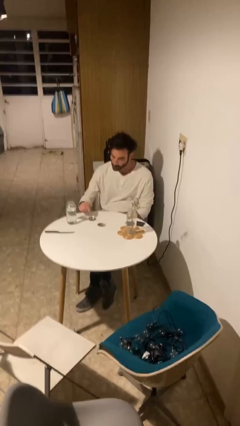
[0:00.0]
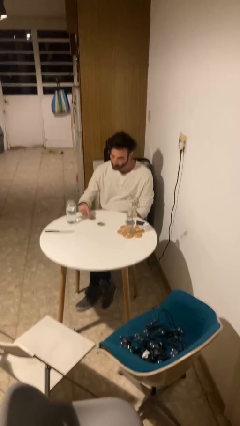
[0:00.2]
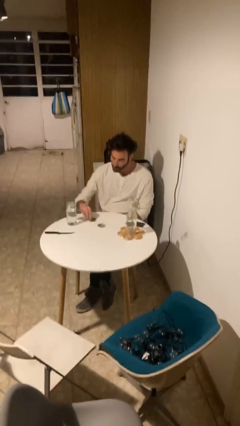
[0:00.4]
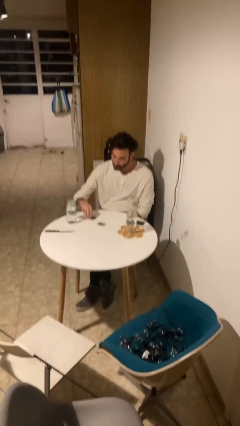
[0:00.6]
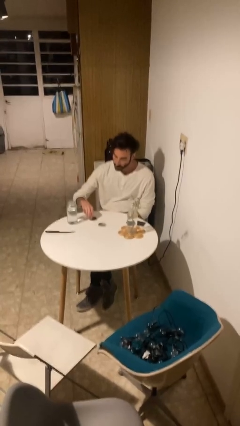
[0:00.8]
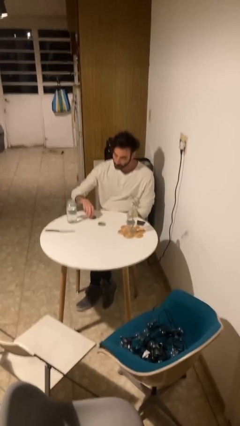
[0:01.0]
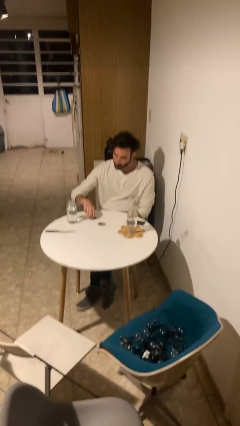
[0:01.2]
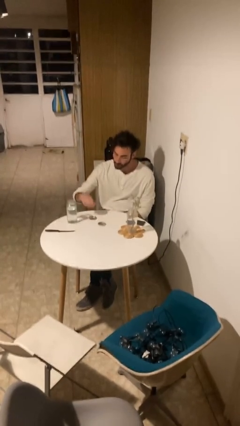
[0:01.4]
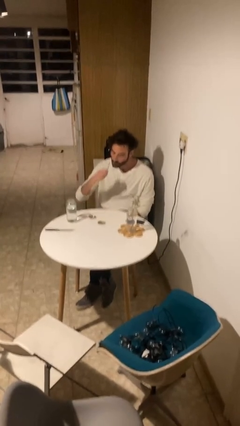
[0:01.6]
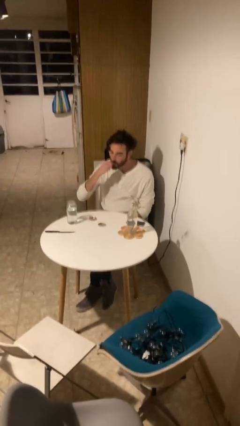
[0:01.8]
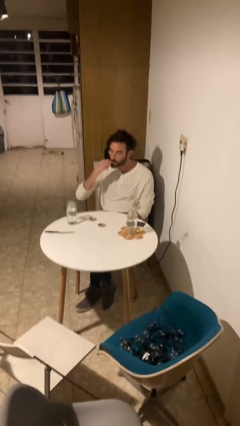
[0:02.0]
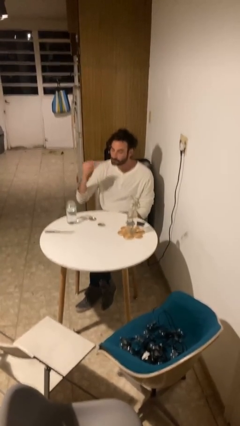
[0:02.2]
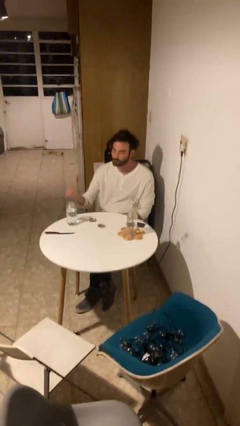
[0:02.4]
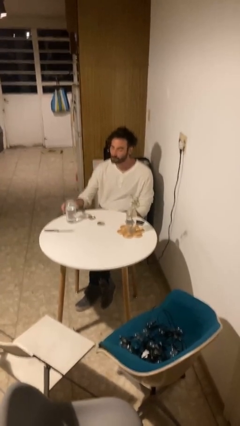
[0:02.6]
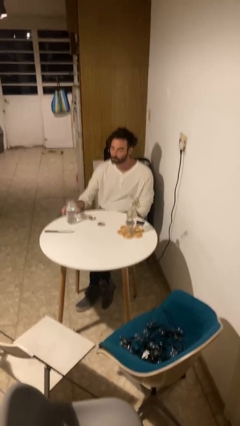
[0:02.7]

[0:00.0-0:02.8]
person takes medicine pills

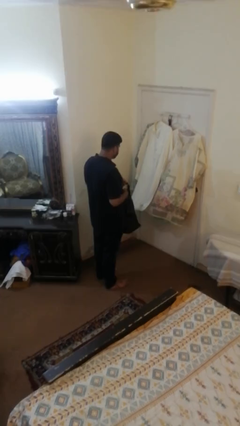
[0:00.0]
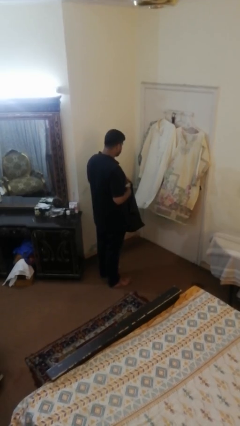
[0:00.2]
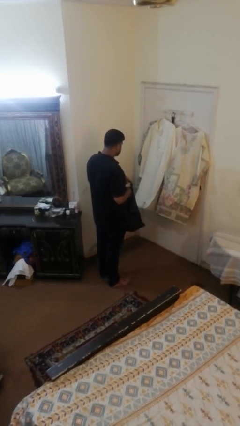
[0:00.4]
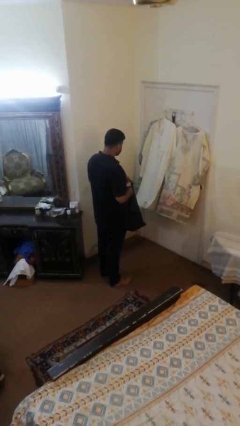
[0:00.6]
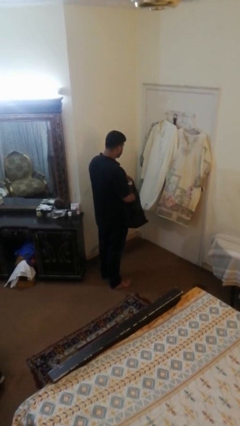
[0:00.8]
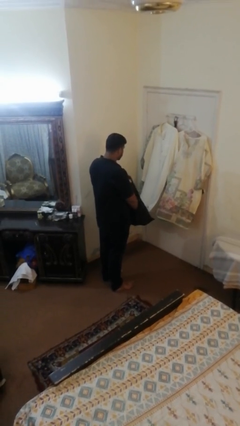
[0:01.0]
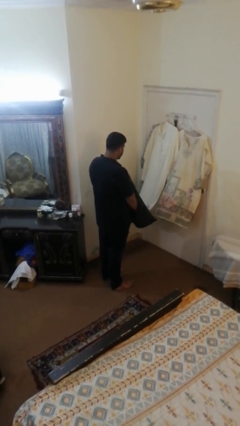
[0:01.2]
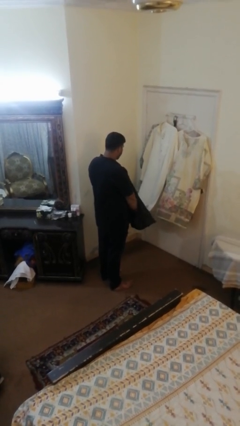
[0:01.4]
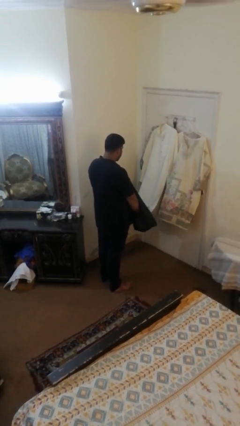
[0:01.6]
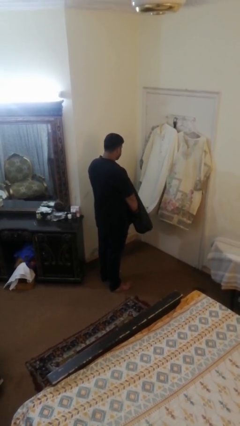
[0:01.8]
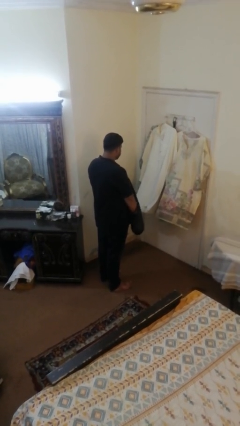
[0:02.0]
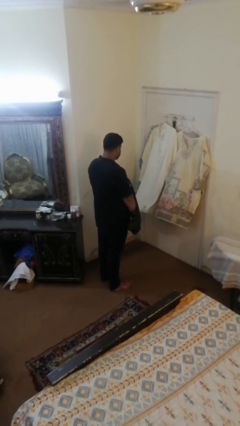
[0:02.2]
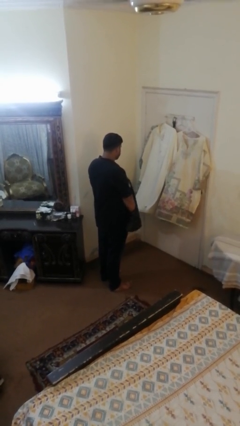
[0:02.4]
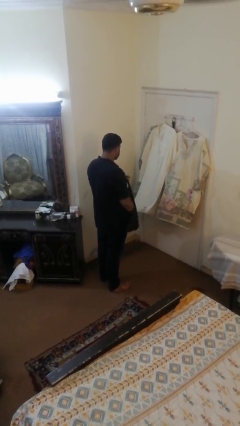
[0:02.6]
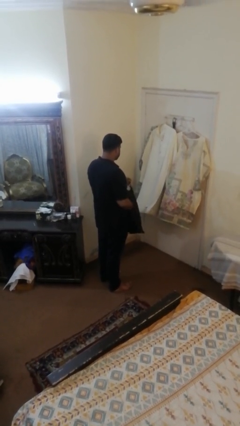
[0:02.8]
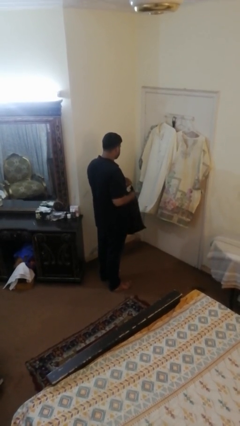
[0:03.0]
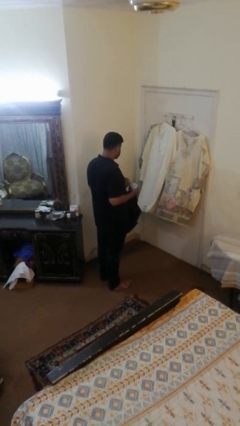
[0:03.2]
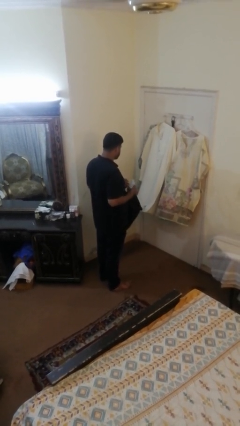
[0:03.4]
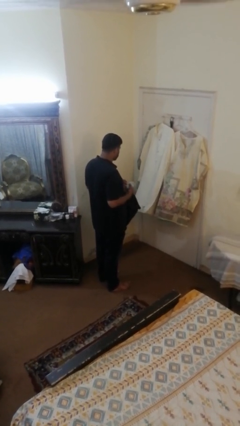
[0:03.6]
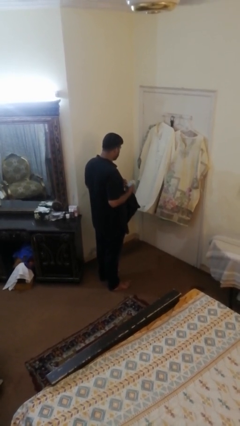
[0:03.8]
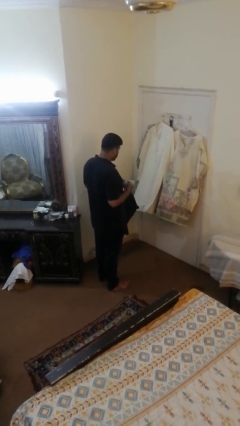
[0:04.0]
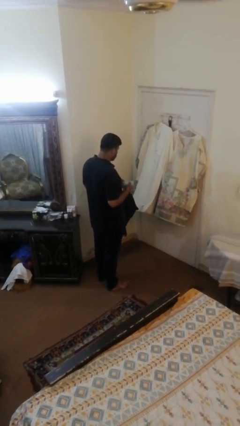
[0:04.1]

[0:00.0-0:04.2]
person takes object from bag

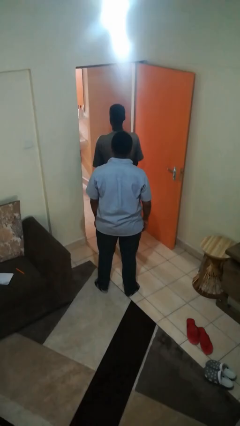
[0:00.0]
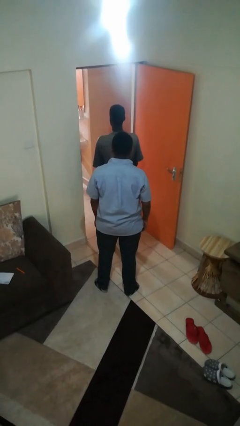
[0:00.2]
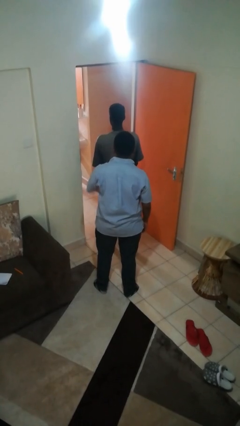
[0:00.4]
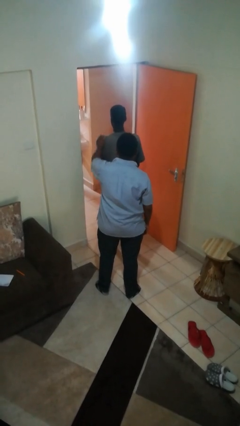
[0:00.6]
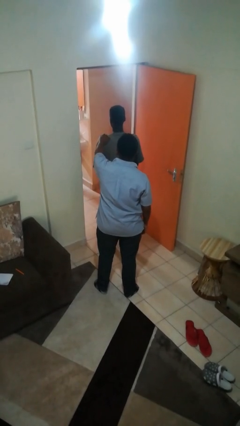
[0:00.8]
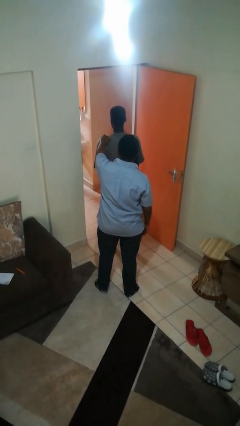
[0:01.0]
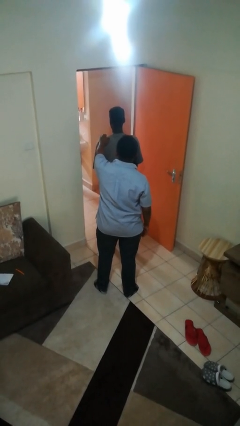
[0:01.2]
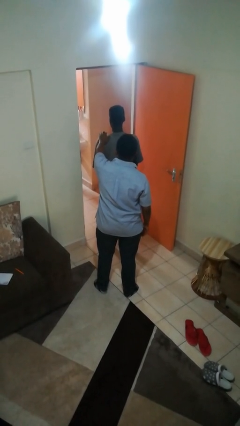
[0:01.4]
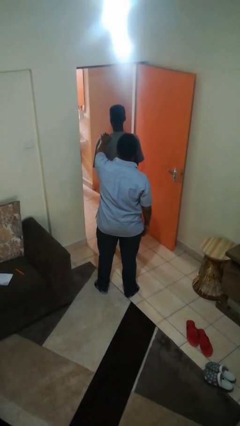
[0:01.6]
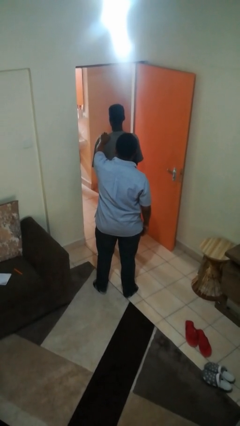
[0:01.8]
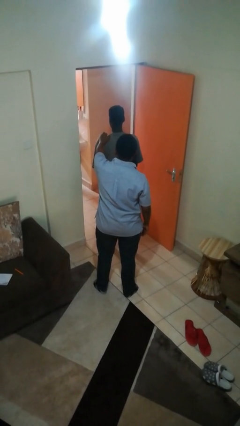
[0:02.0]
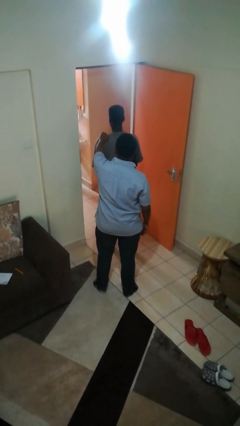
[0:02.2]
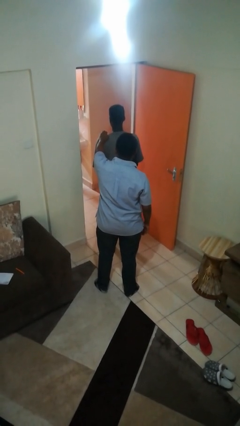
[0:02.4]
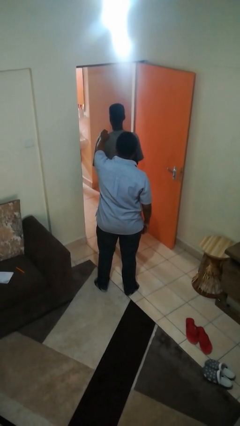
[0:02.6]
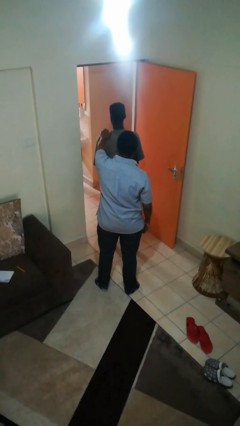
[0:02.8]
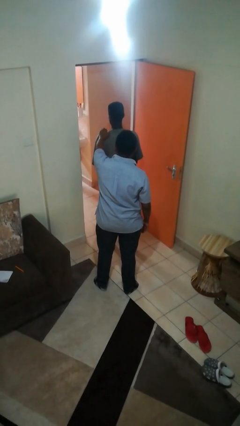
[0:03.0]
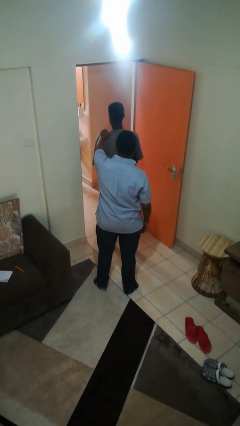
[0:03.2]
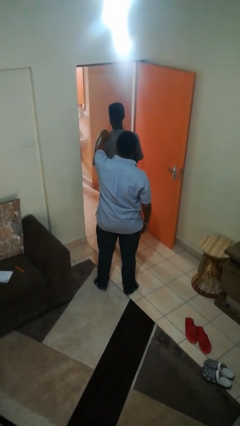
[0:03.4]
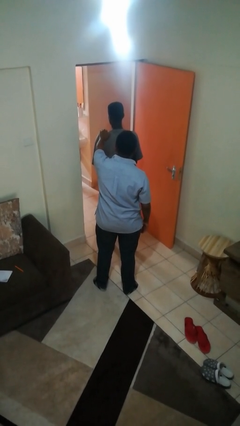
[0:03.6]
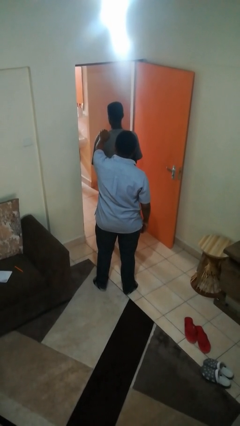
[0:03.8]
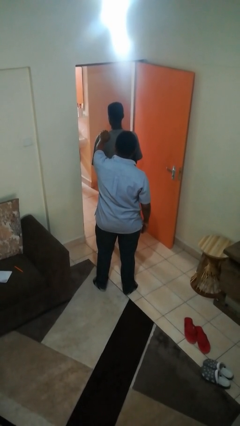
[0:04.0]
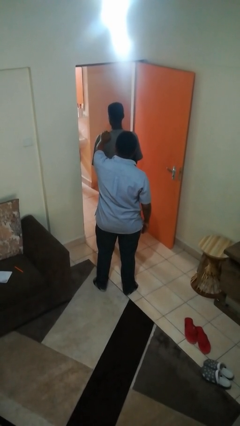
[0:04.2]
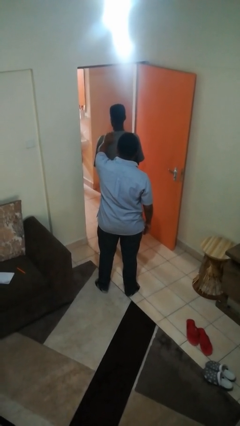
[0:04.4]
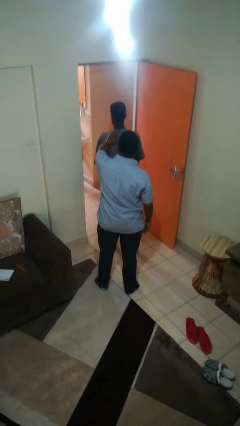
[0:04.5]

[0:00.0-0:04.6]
person touches back of person

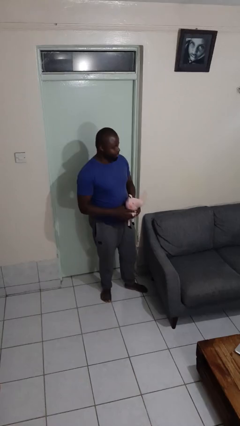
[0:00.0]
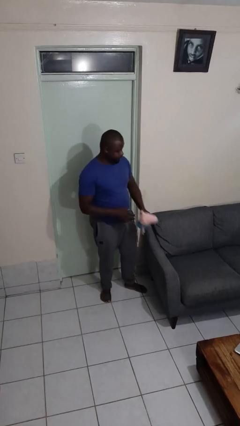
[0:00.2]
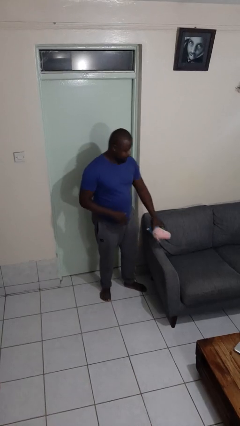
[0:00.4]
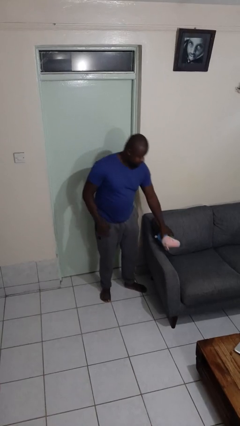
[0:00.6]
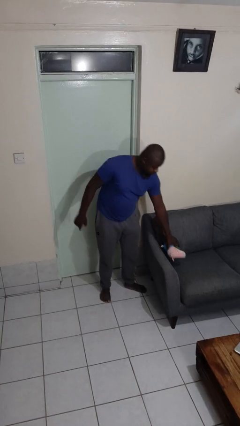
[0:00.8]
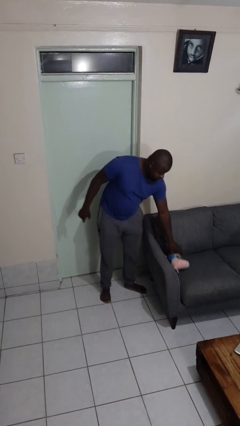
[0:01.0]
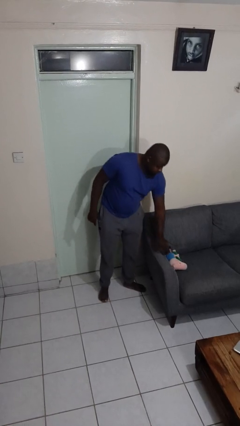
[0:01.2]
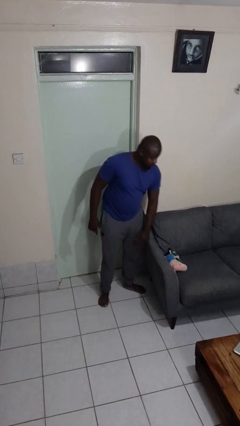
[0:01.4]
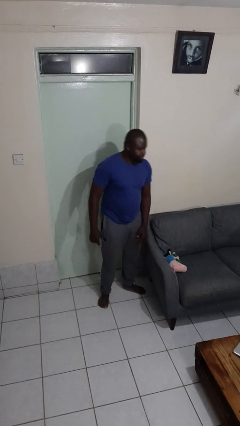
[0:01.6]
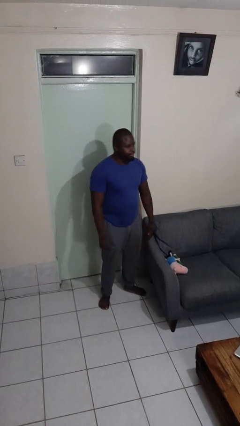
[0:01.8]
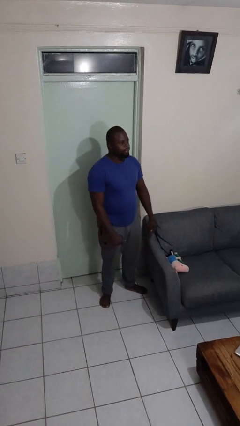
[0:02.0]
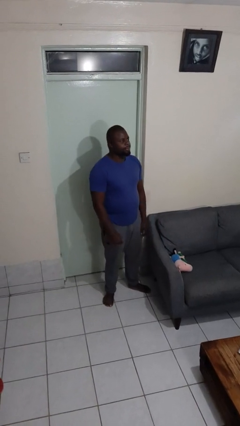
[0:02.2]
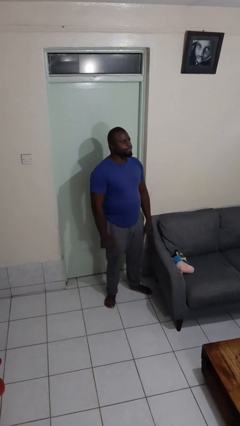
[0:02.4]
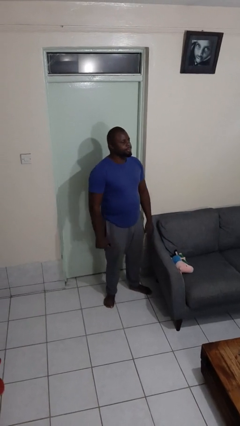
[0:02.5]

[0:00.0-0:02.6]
person puts down object on couch

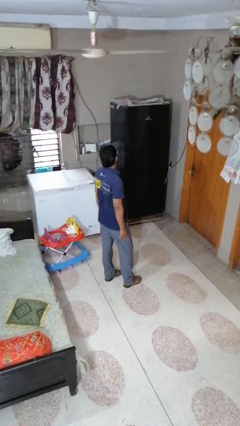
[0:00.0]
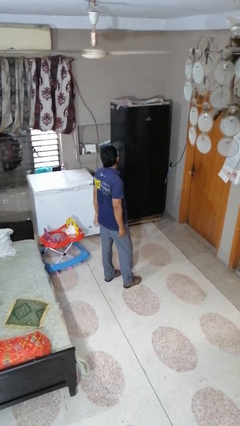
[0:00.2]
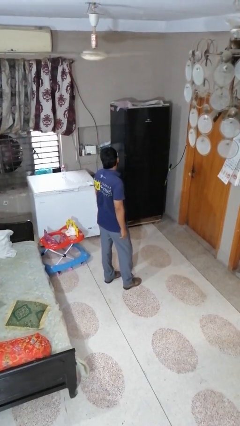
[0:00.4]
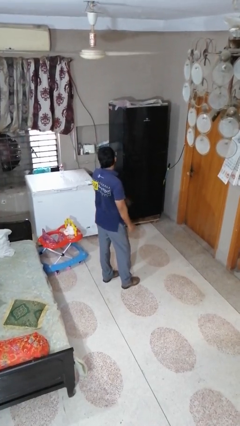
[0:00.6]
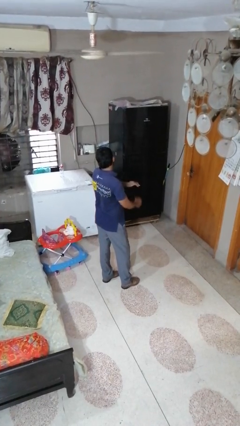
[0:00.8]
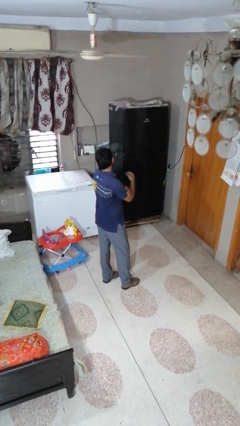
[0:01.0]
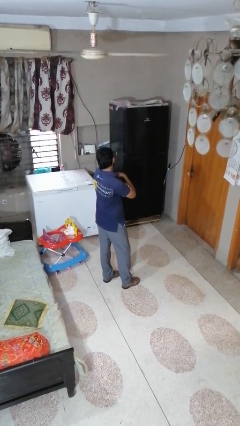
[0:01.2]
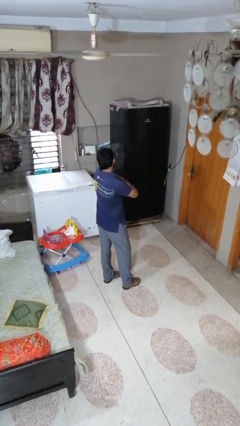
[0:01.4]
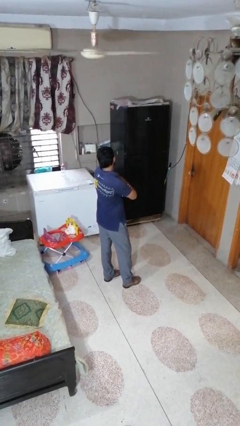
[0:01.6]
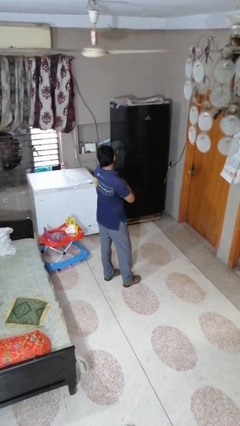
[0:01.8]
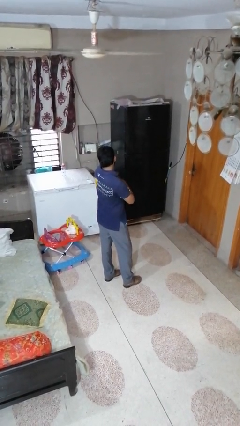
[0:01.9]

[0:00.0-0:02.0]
person crosses arms

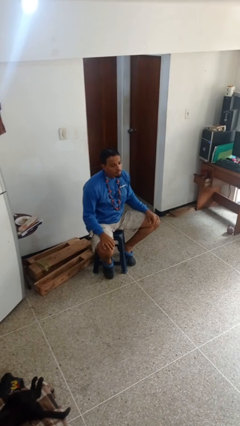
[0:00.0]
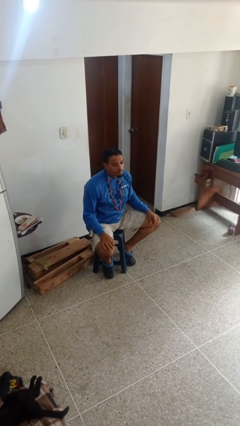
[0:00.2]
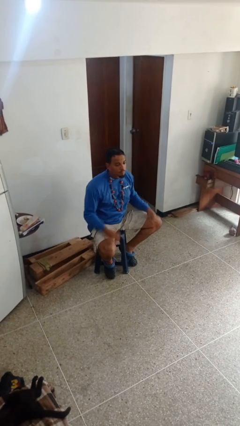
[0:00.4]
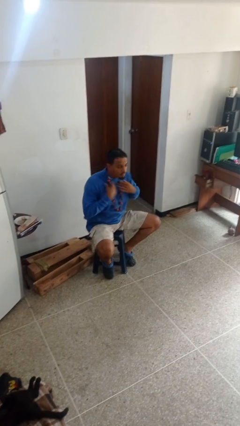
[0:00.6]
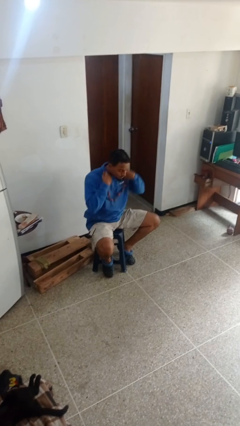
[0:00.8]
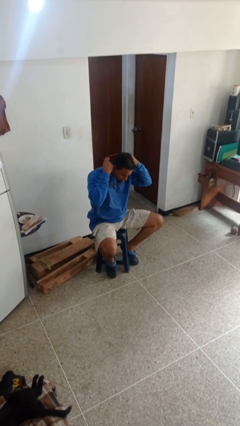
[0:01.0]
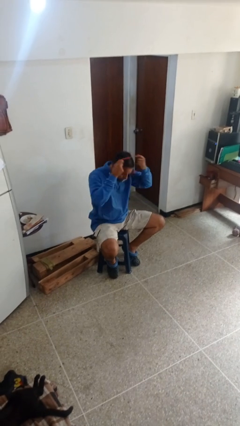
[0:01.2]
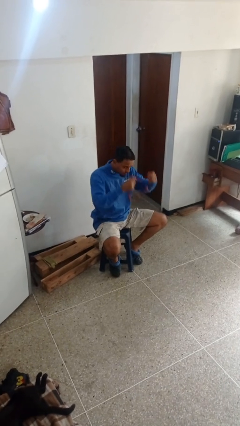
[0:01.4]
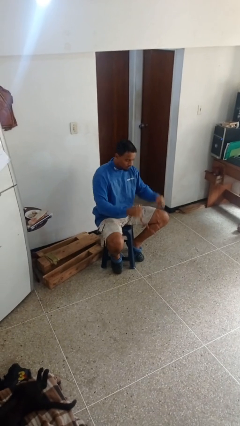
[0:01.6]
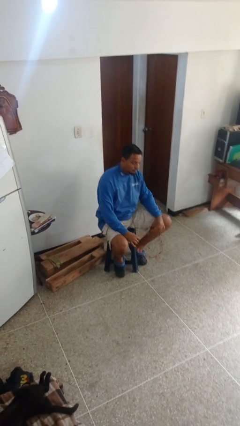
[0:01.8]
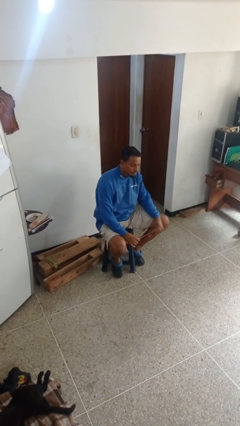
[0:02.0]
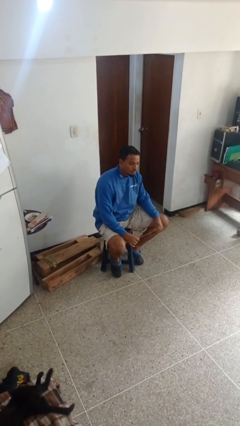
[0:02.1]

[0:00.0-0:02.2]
person takes off necklace
